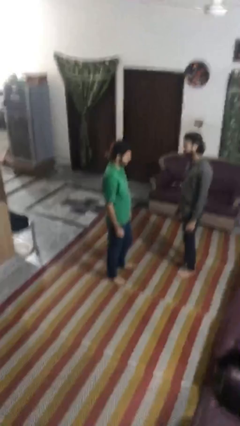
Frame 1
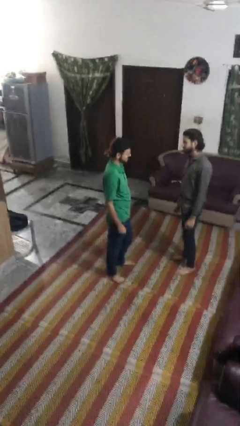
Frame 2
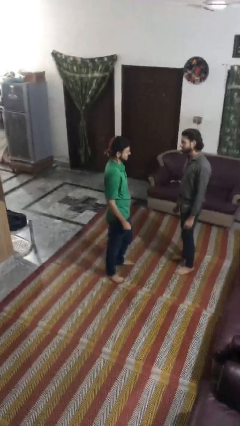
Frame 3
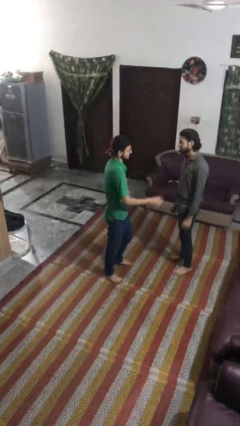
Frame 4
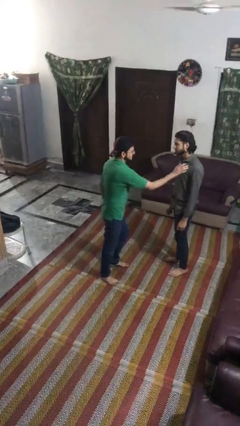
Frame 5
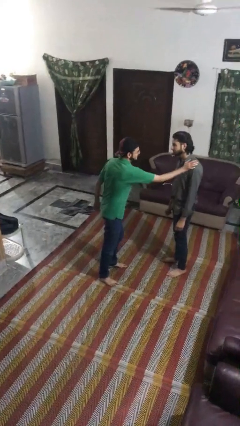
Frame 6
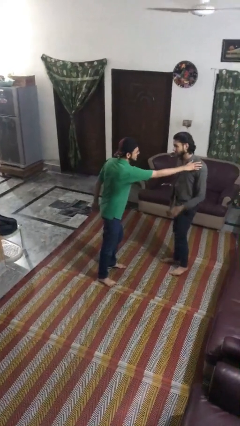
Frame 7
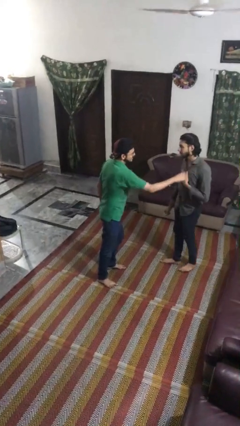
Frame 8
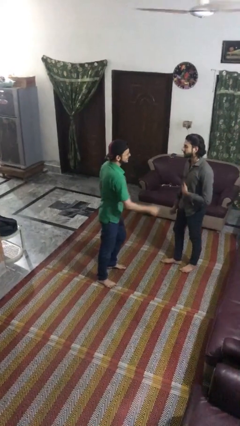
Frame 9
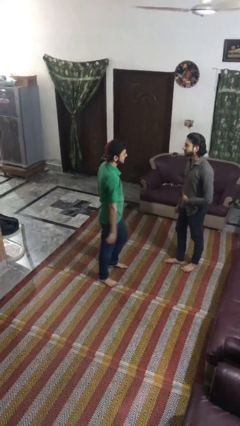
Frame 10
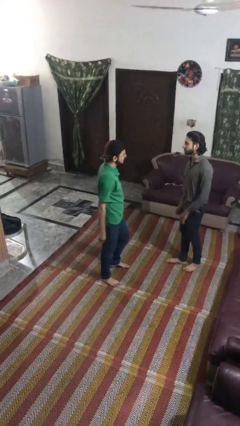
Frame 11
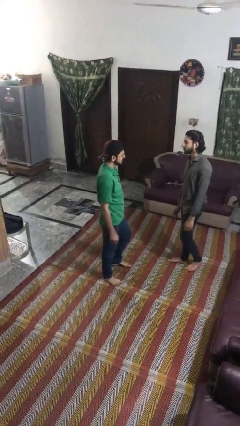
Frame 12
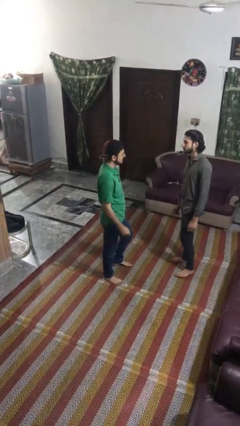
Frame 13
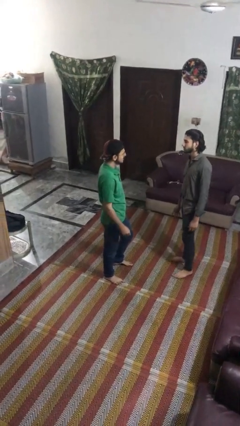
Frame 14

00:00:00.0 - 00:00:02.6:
person shoves person

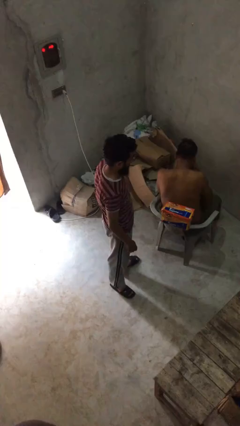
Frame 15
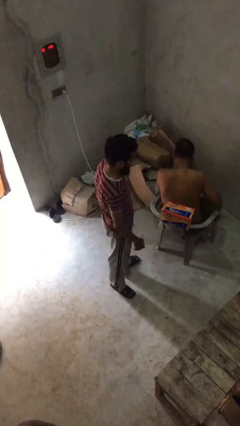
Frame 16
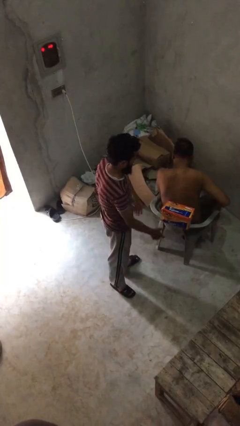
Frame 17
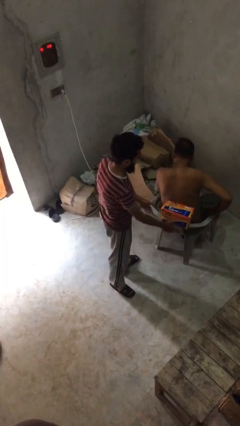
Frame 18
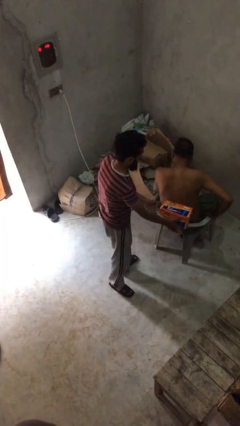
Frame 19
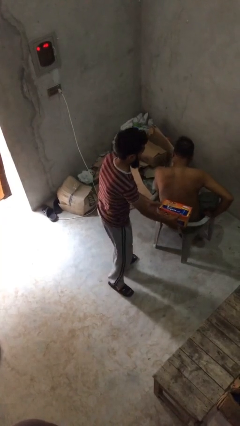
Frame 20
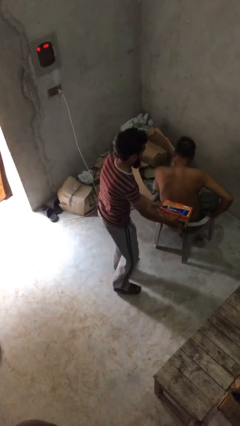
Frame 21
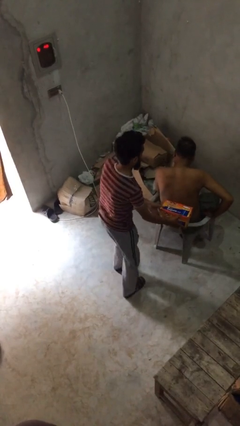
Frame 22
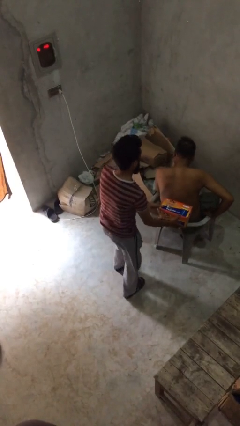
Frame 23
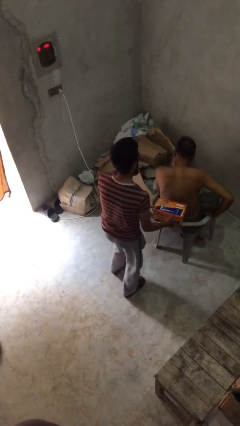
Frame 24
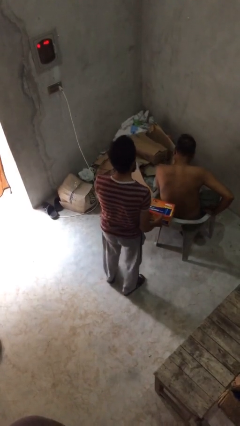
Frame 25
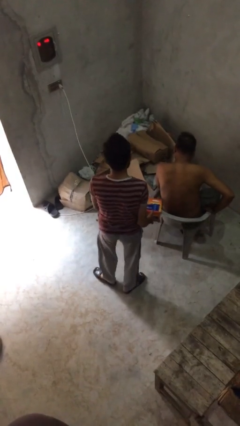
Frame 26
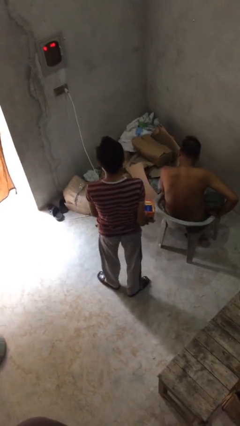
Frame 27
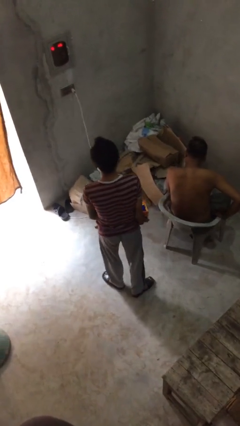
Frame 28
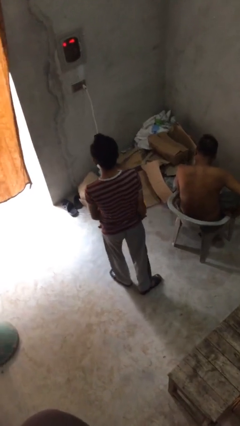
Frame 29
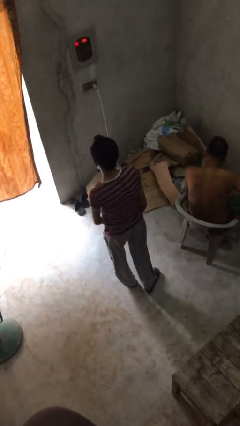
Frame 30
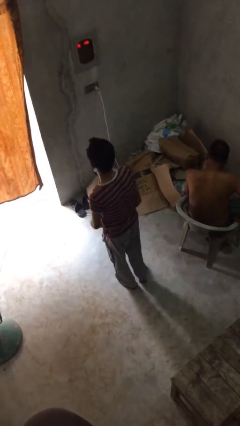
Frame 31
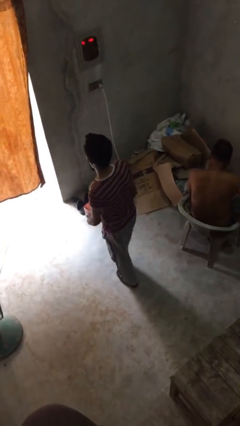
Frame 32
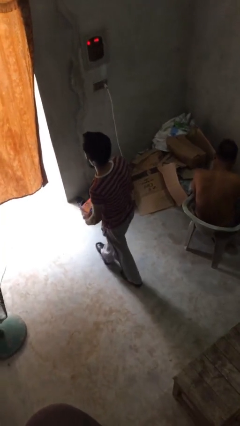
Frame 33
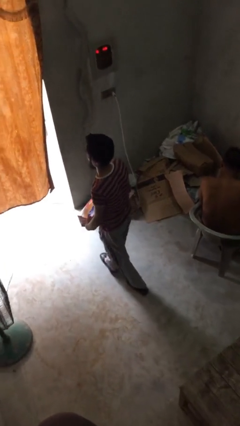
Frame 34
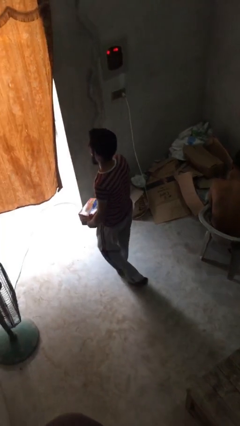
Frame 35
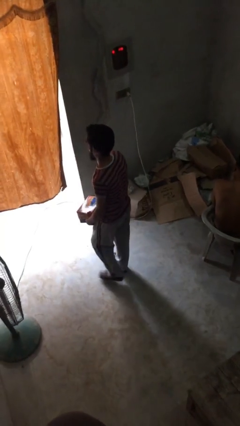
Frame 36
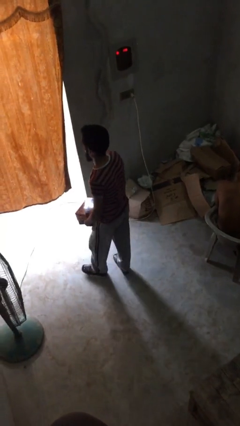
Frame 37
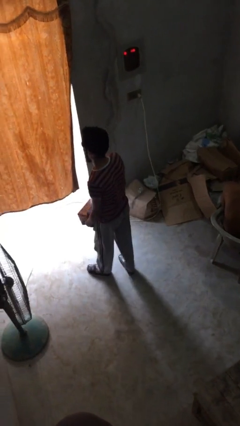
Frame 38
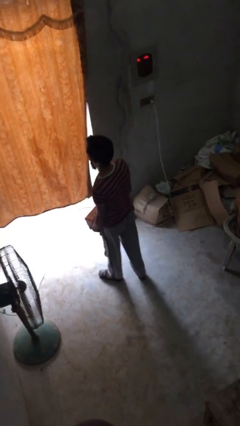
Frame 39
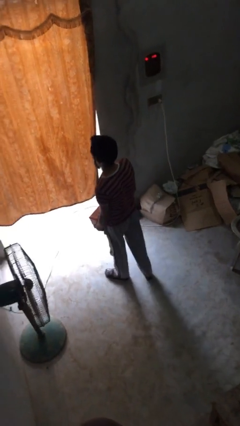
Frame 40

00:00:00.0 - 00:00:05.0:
person steals object from person

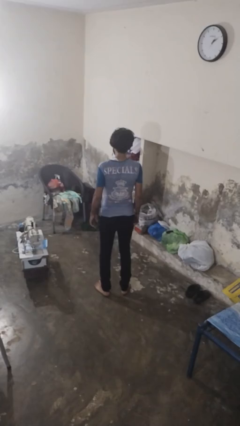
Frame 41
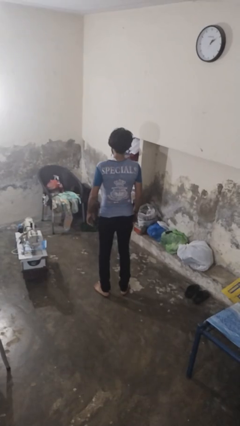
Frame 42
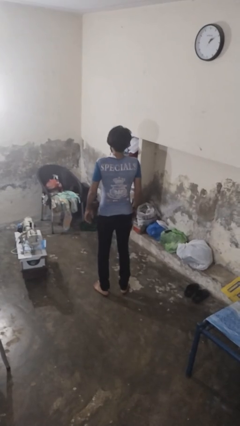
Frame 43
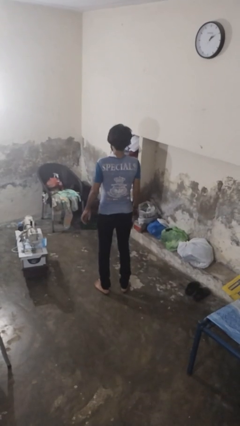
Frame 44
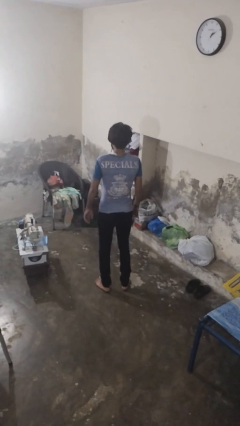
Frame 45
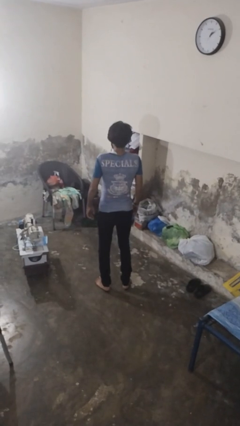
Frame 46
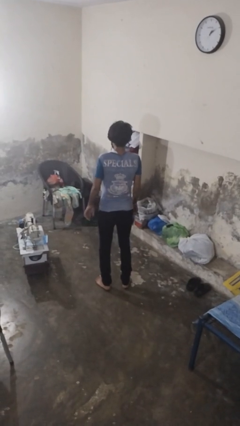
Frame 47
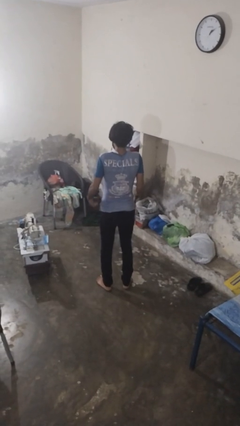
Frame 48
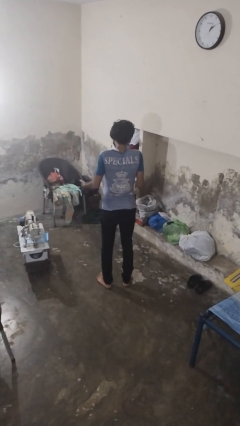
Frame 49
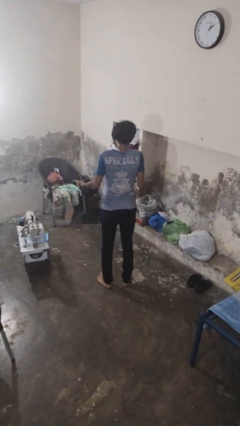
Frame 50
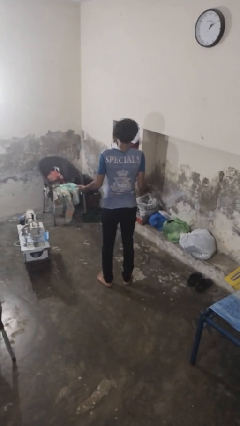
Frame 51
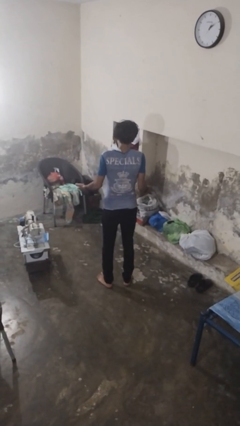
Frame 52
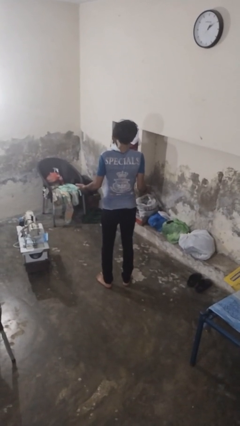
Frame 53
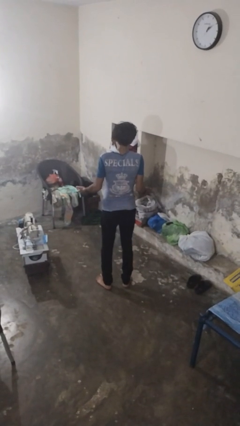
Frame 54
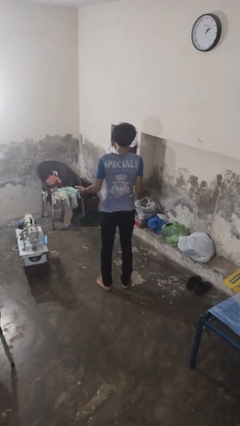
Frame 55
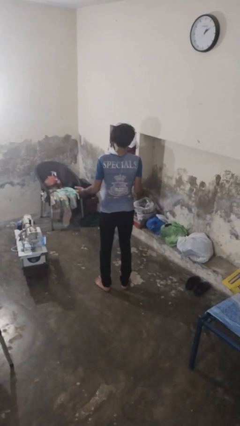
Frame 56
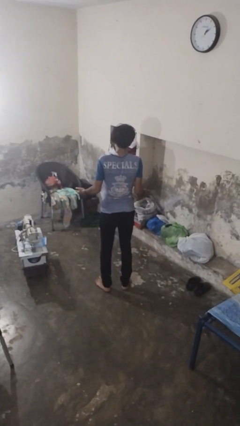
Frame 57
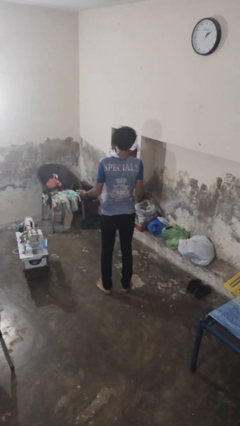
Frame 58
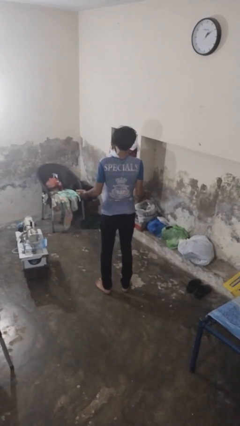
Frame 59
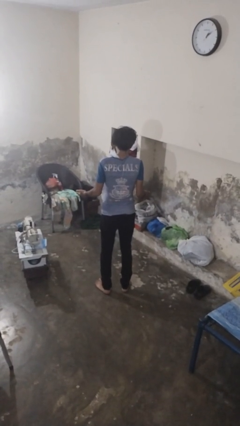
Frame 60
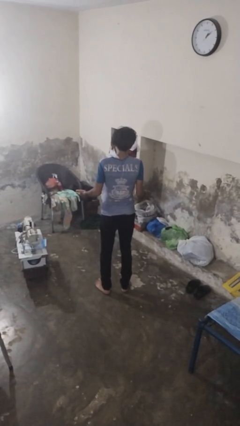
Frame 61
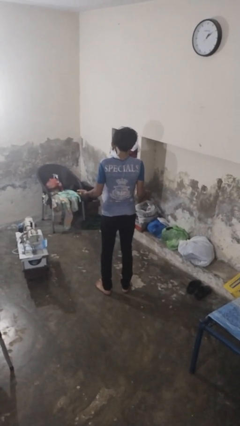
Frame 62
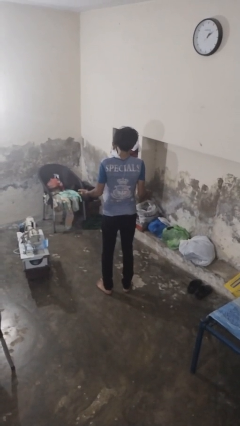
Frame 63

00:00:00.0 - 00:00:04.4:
person shrugs

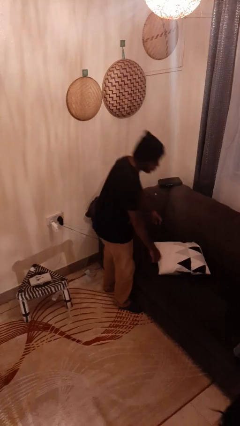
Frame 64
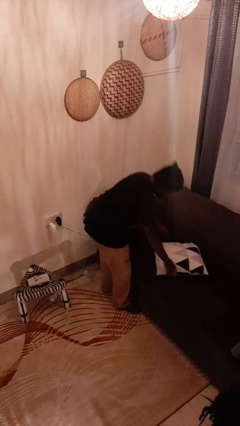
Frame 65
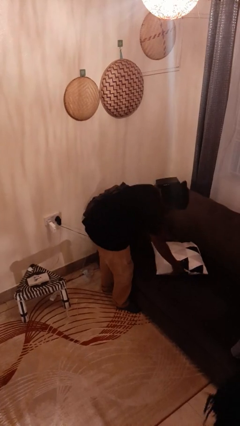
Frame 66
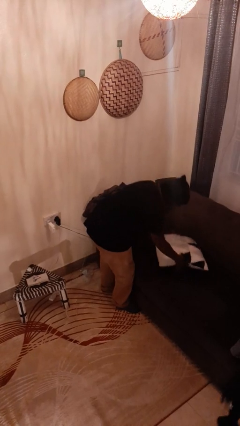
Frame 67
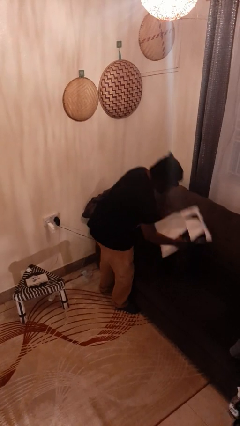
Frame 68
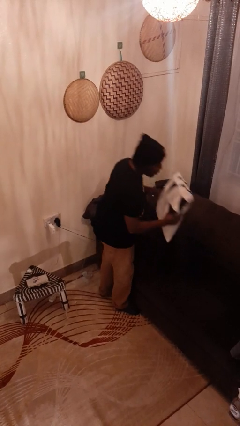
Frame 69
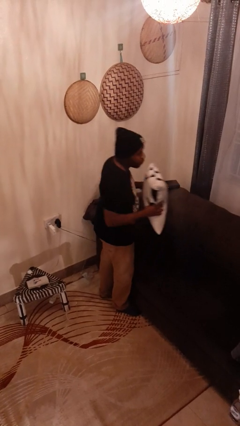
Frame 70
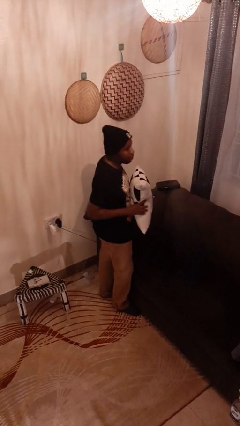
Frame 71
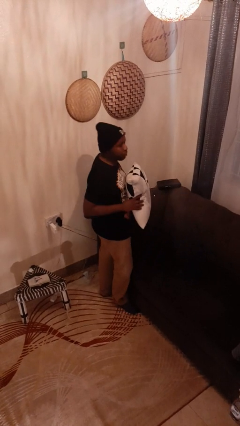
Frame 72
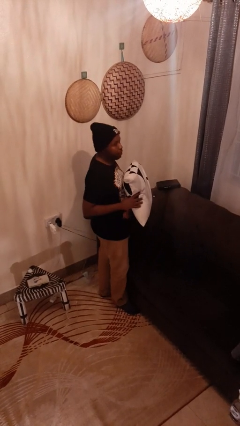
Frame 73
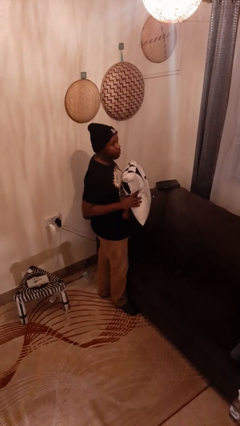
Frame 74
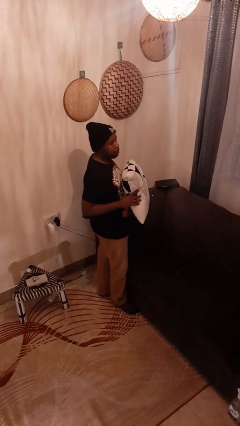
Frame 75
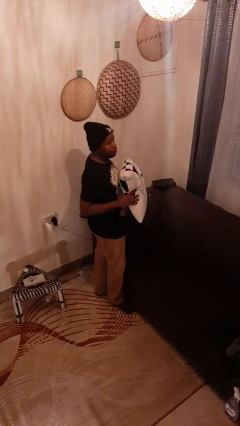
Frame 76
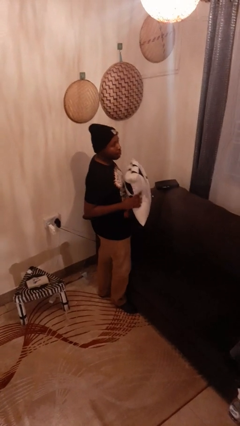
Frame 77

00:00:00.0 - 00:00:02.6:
person picks up object from couch

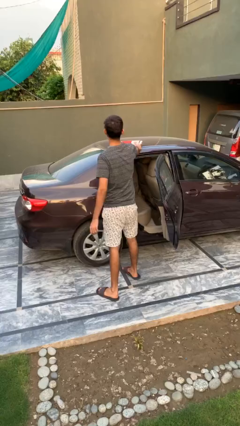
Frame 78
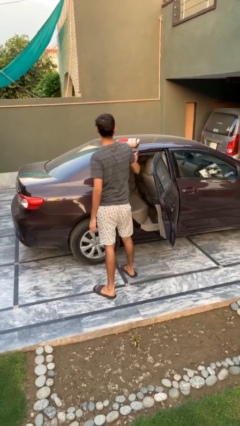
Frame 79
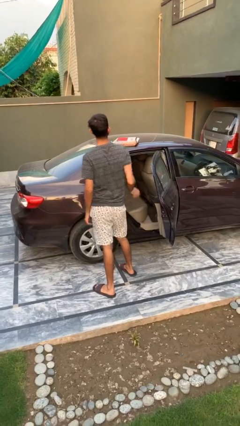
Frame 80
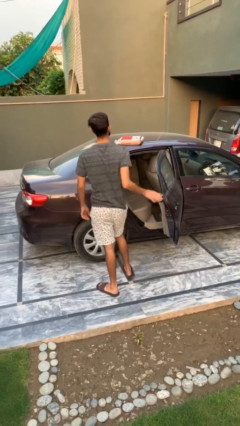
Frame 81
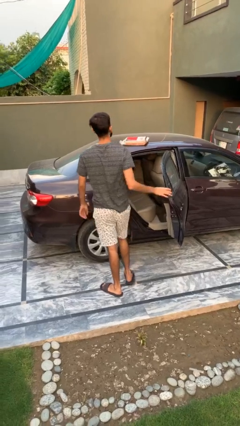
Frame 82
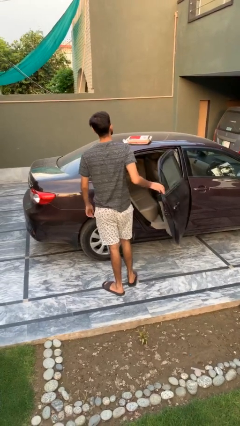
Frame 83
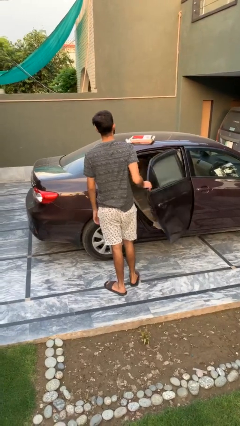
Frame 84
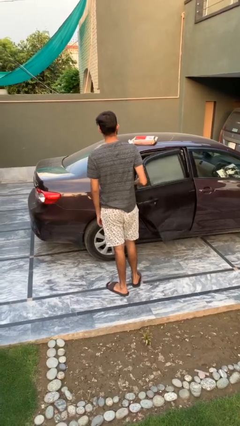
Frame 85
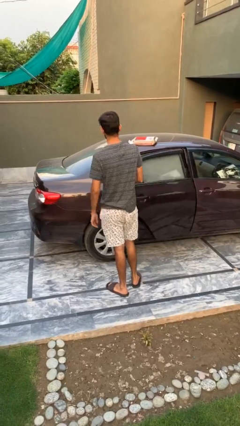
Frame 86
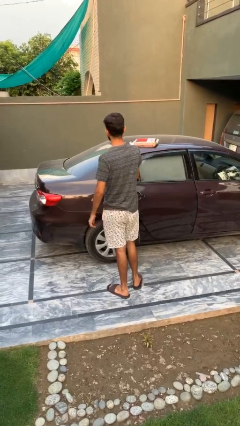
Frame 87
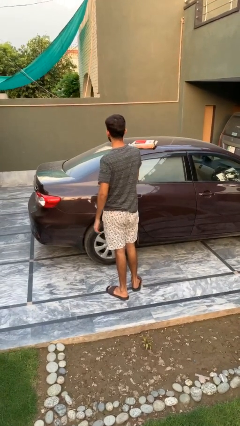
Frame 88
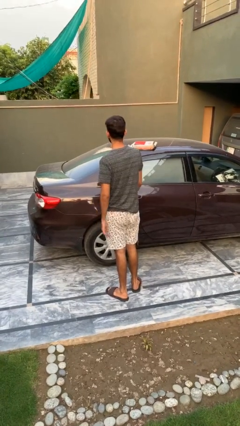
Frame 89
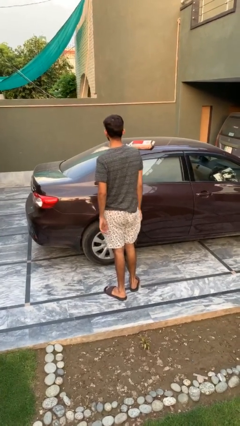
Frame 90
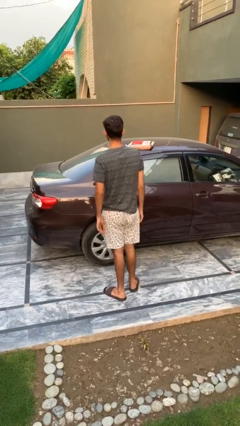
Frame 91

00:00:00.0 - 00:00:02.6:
person closes car door
